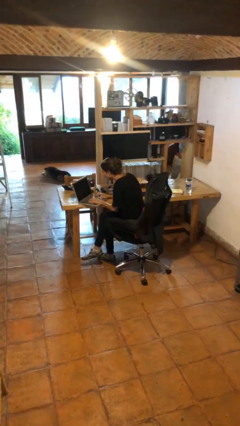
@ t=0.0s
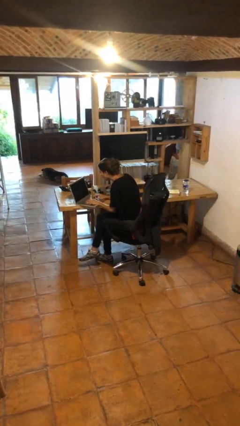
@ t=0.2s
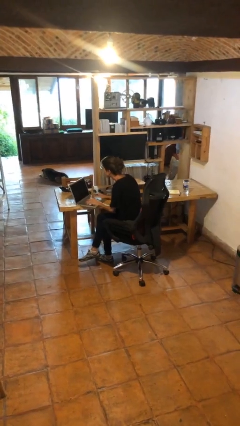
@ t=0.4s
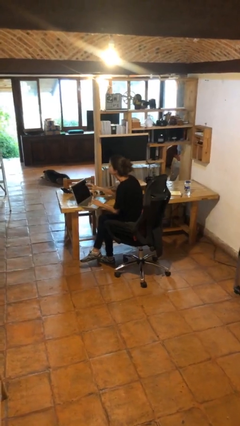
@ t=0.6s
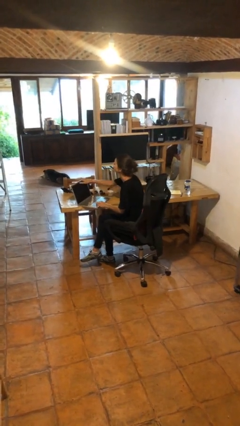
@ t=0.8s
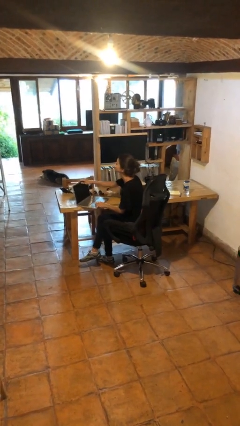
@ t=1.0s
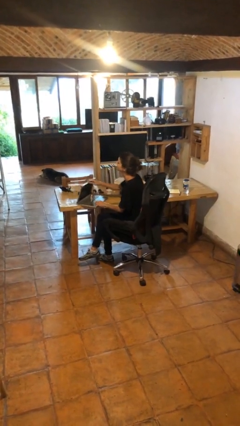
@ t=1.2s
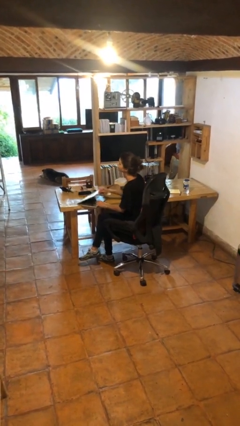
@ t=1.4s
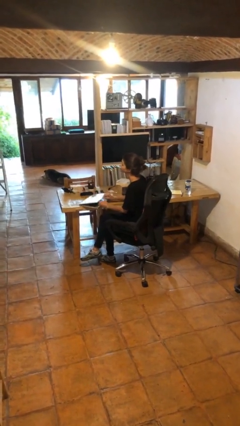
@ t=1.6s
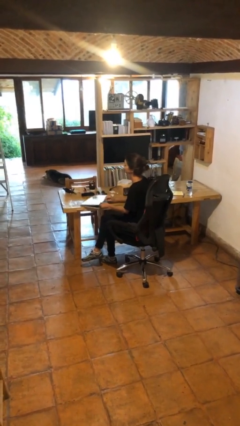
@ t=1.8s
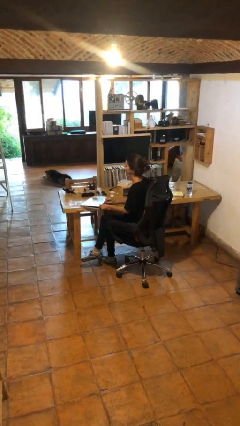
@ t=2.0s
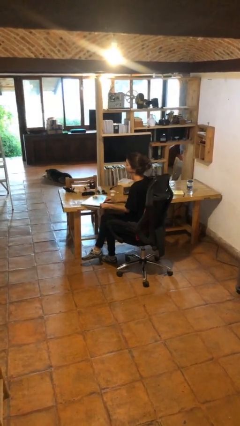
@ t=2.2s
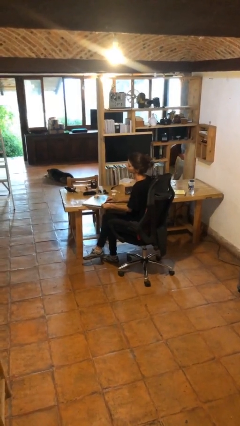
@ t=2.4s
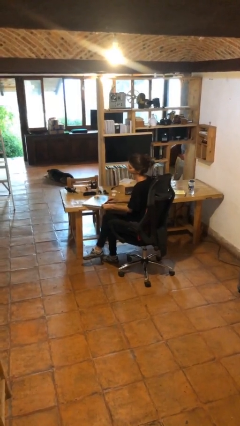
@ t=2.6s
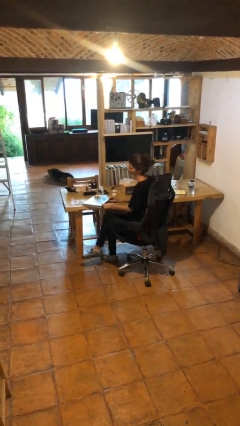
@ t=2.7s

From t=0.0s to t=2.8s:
person closes laptop

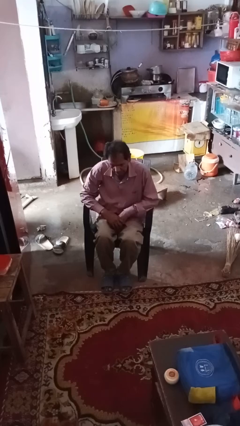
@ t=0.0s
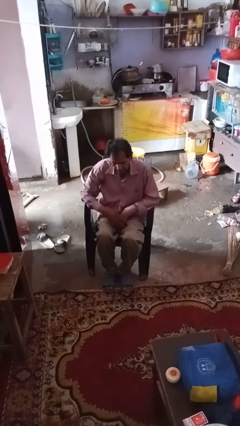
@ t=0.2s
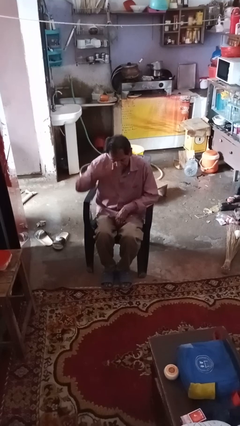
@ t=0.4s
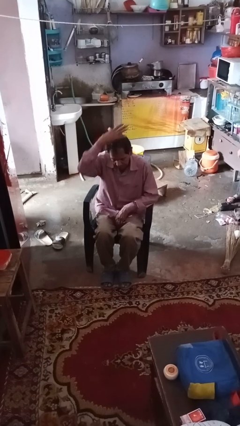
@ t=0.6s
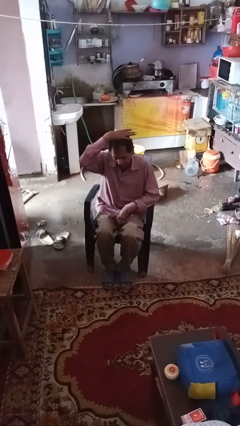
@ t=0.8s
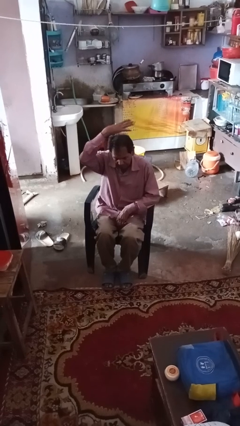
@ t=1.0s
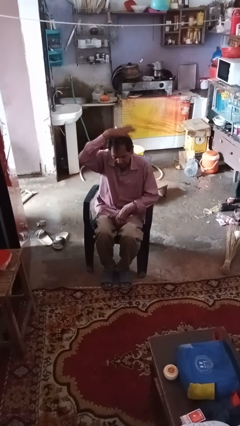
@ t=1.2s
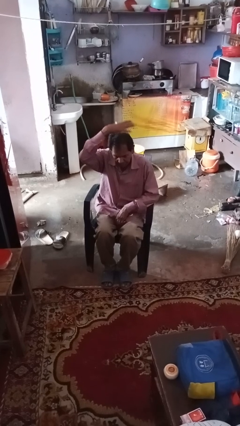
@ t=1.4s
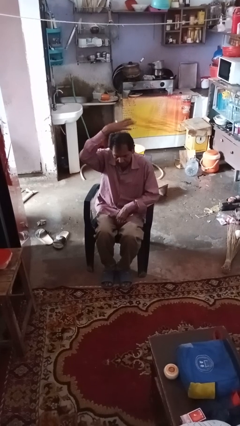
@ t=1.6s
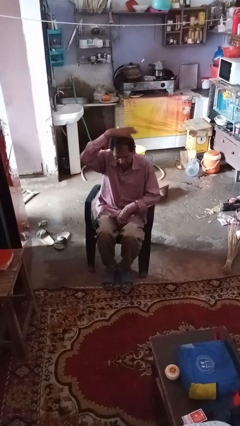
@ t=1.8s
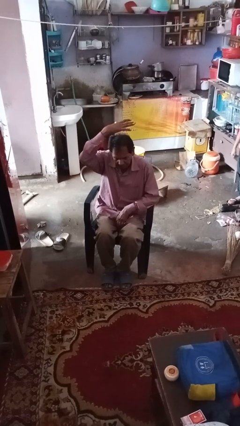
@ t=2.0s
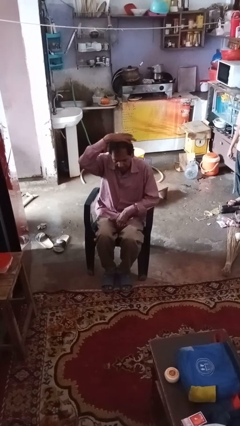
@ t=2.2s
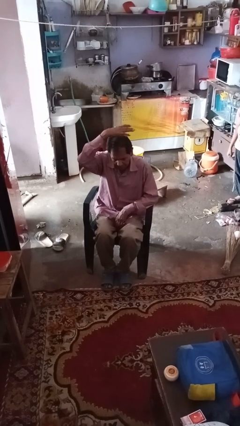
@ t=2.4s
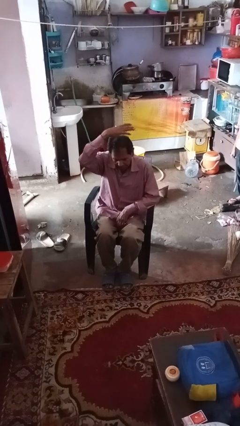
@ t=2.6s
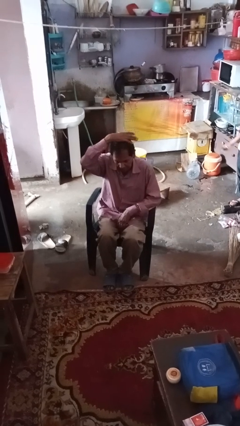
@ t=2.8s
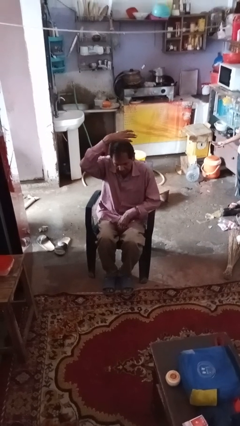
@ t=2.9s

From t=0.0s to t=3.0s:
person pats head

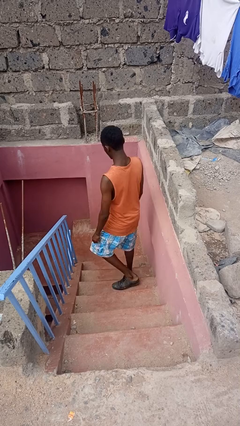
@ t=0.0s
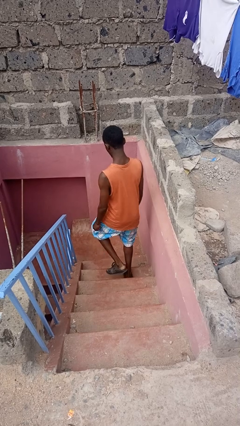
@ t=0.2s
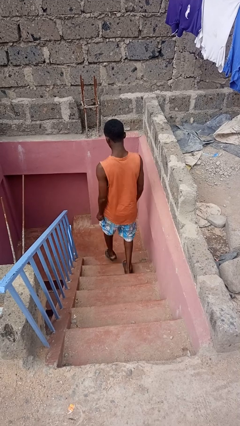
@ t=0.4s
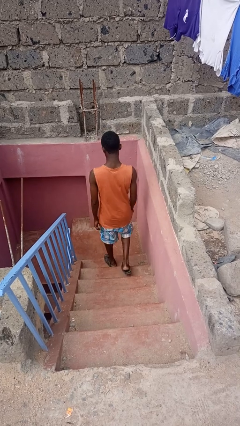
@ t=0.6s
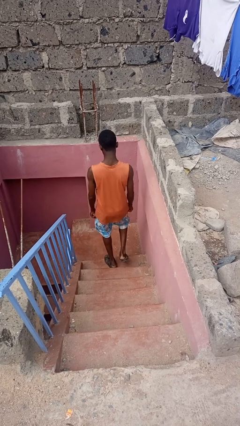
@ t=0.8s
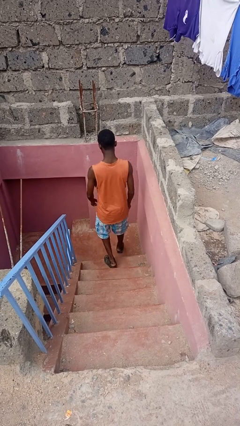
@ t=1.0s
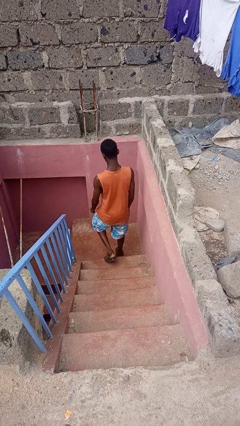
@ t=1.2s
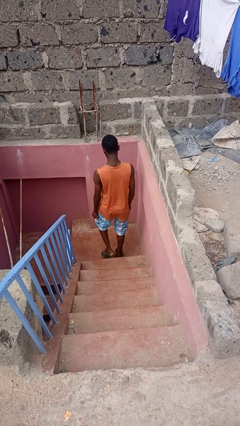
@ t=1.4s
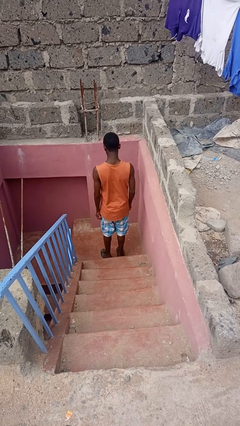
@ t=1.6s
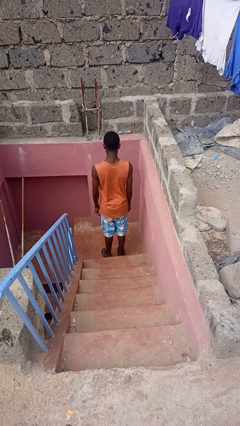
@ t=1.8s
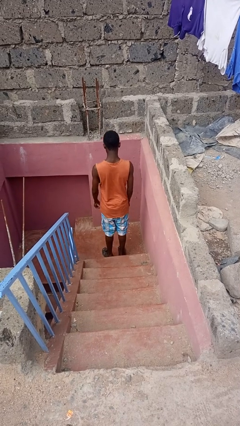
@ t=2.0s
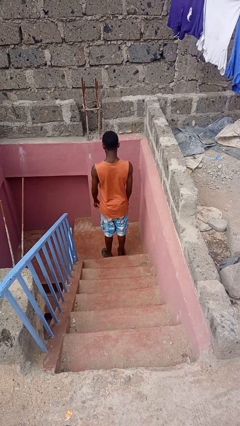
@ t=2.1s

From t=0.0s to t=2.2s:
person climbs down stairs

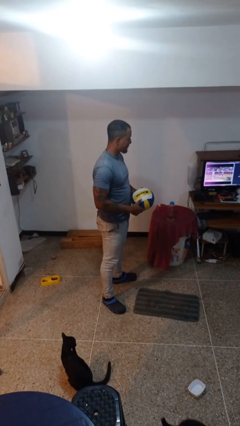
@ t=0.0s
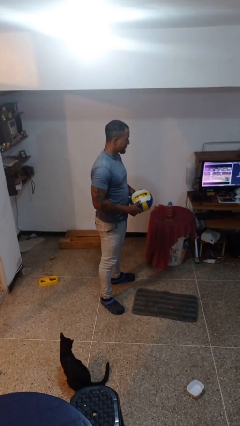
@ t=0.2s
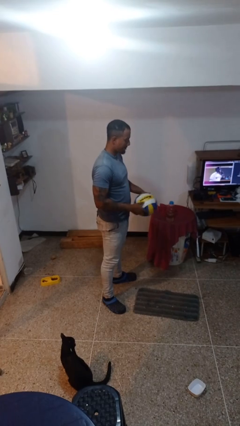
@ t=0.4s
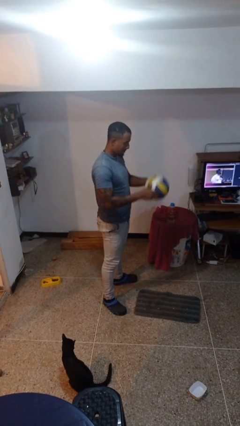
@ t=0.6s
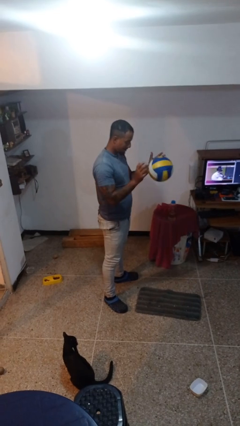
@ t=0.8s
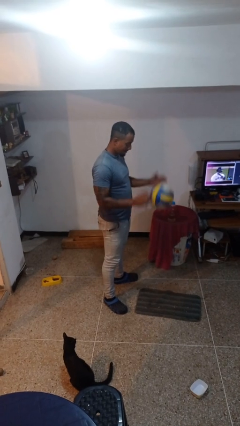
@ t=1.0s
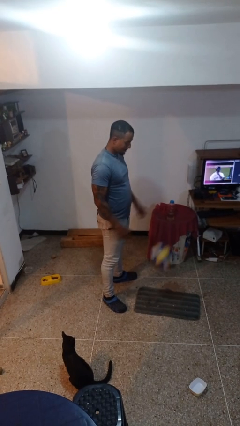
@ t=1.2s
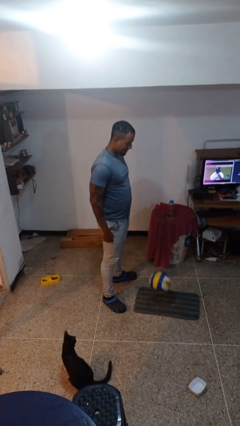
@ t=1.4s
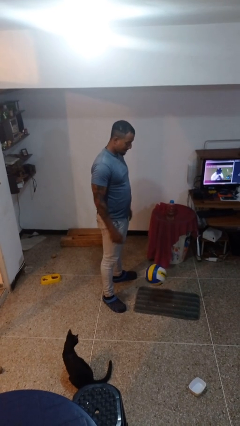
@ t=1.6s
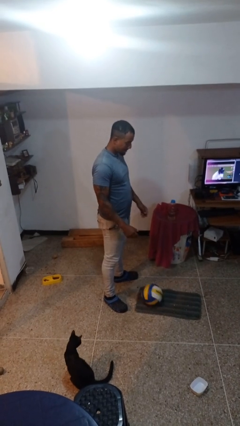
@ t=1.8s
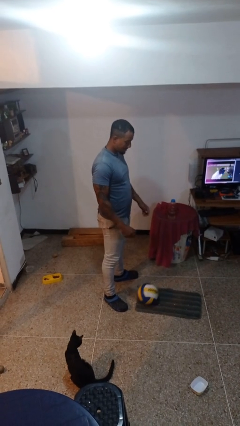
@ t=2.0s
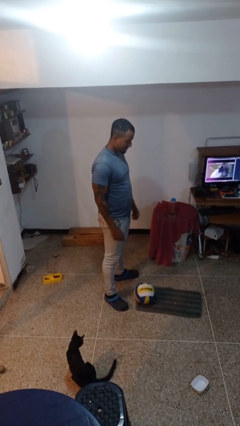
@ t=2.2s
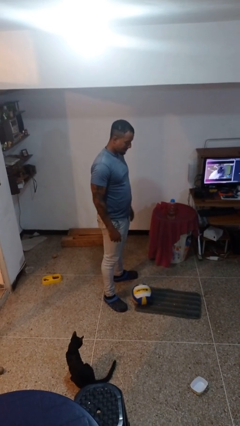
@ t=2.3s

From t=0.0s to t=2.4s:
person throws object into air

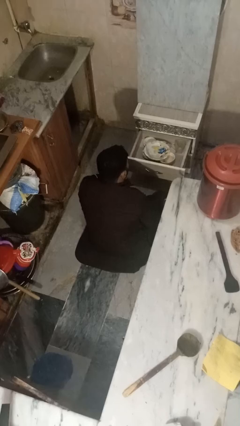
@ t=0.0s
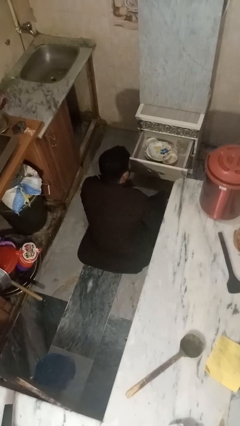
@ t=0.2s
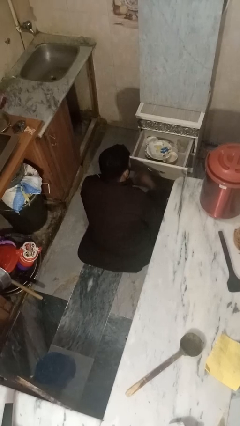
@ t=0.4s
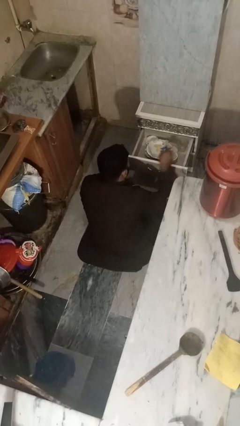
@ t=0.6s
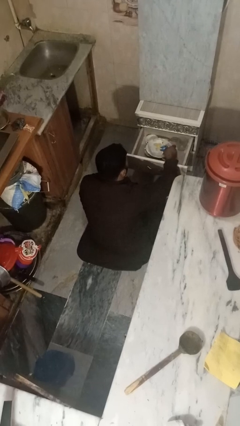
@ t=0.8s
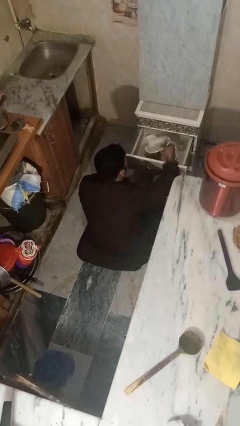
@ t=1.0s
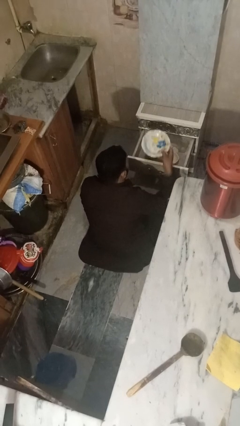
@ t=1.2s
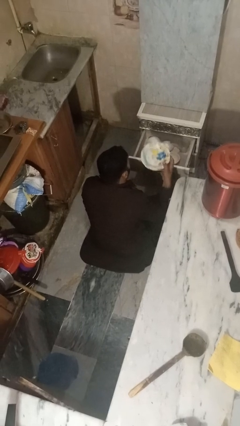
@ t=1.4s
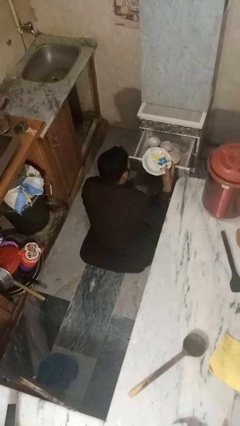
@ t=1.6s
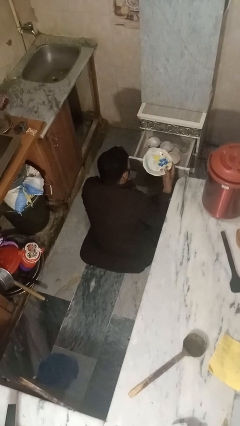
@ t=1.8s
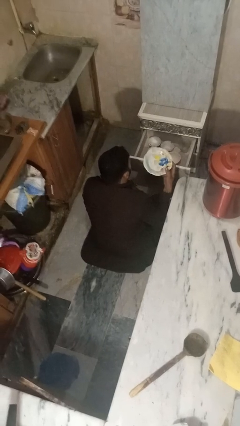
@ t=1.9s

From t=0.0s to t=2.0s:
person takes object from kitchen drawer

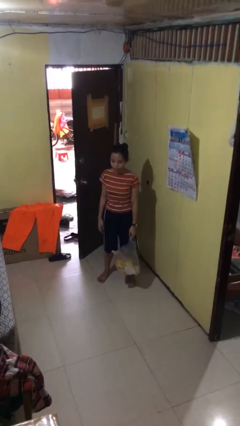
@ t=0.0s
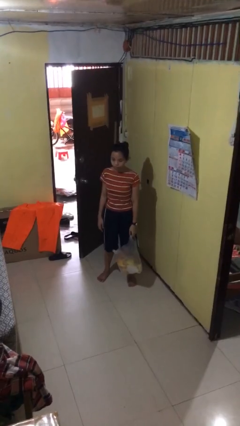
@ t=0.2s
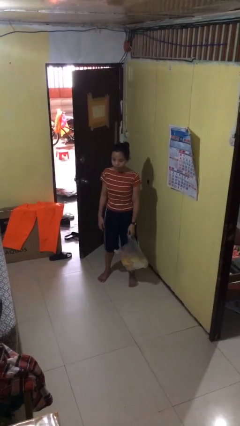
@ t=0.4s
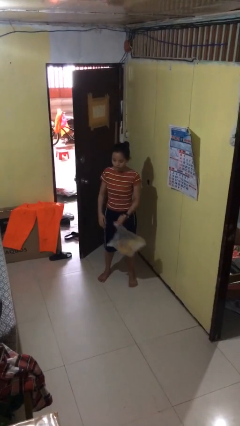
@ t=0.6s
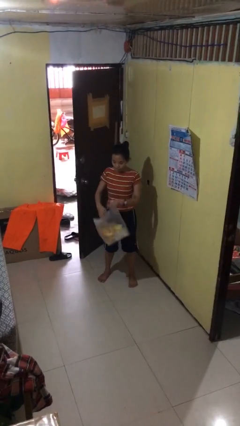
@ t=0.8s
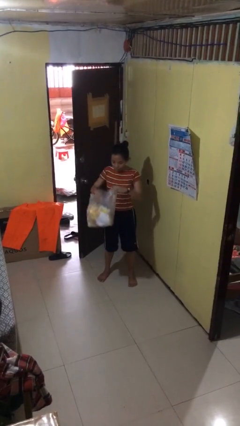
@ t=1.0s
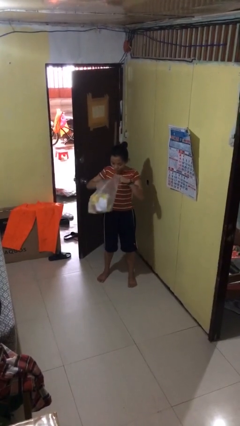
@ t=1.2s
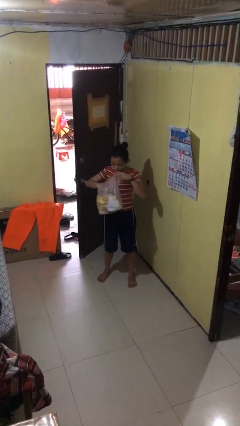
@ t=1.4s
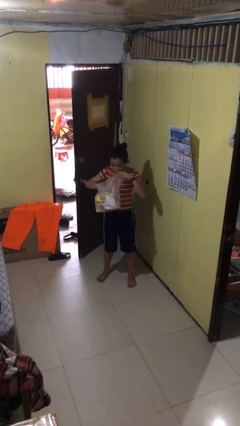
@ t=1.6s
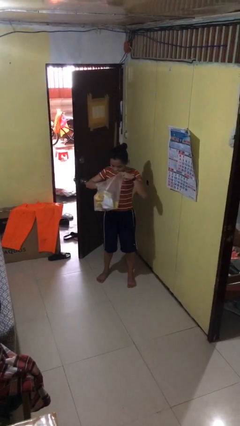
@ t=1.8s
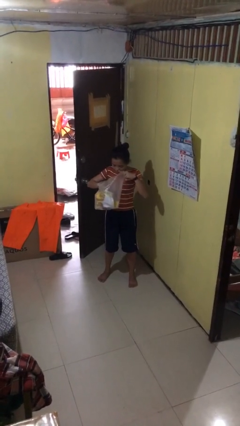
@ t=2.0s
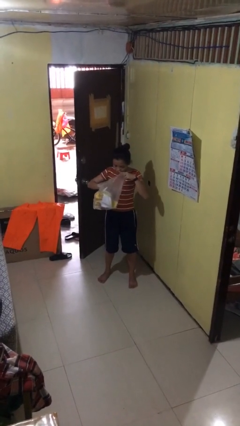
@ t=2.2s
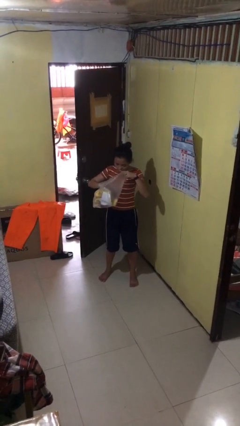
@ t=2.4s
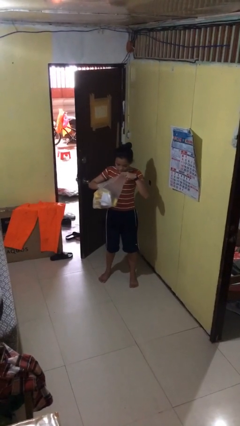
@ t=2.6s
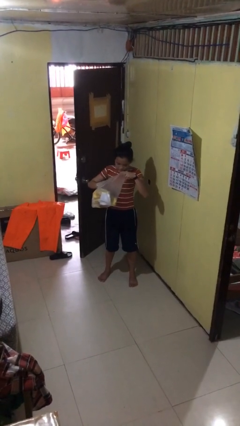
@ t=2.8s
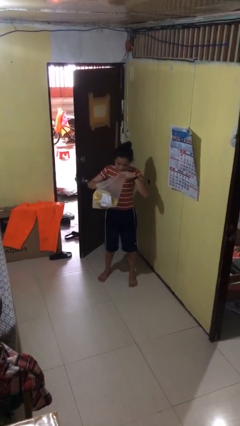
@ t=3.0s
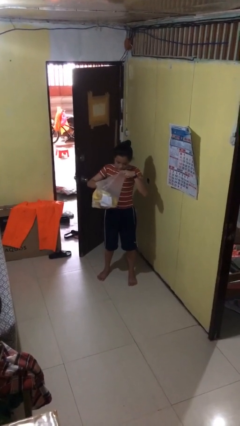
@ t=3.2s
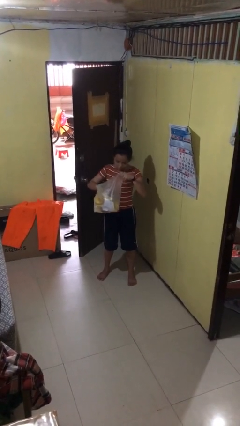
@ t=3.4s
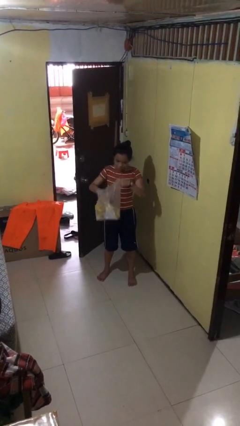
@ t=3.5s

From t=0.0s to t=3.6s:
person searches in bag

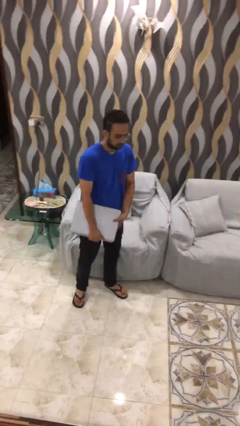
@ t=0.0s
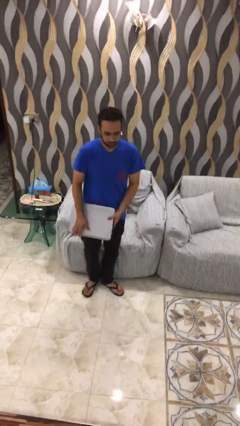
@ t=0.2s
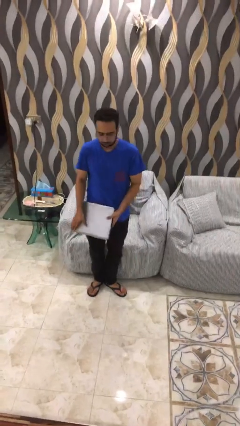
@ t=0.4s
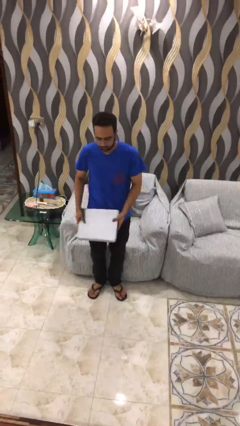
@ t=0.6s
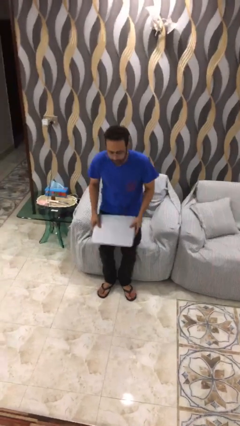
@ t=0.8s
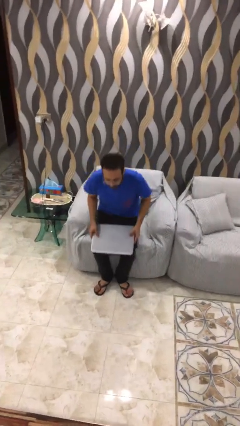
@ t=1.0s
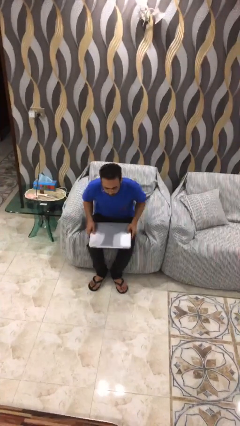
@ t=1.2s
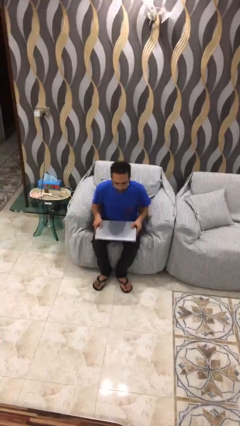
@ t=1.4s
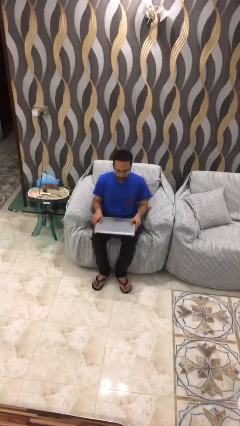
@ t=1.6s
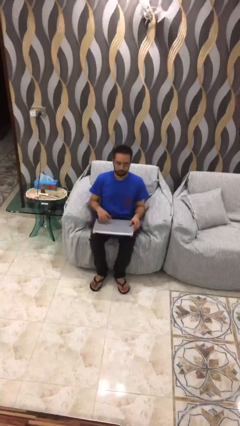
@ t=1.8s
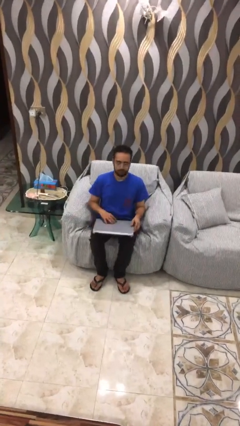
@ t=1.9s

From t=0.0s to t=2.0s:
person sits down
